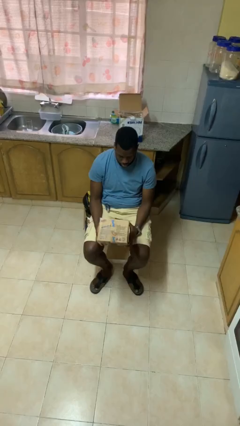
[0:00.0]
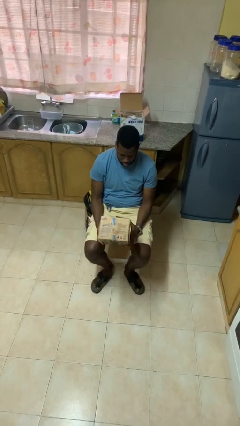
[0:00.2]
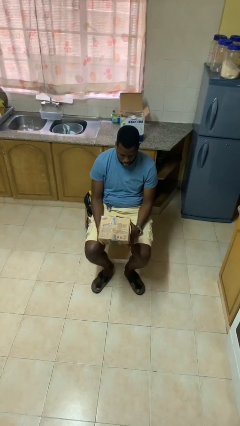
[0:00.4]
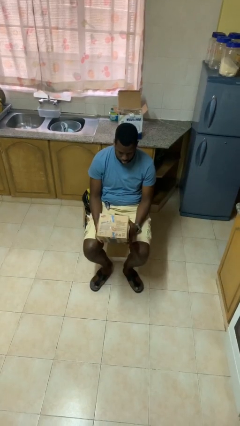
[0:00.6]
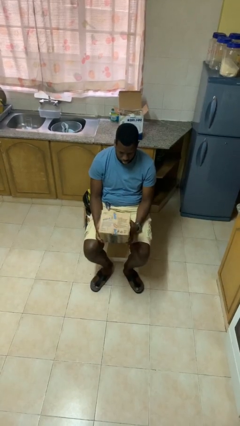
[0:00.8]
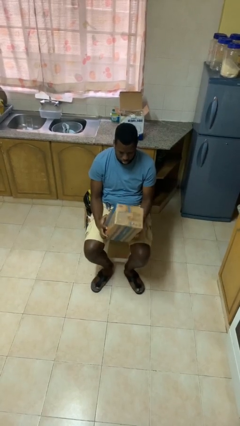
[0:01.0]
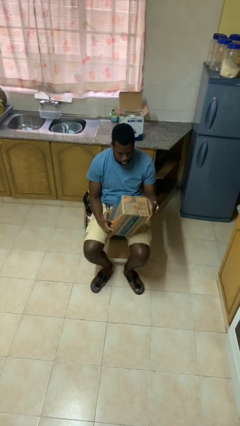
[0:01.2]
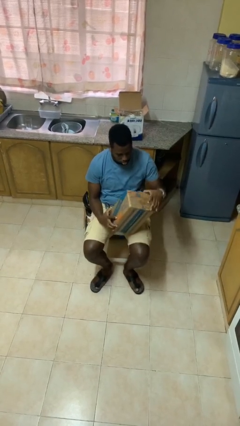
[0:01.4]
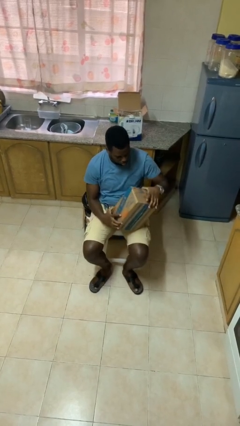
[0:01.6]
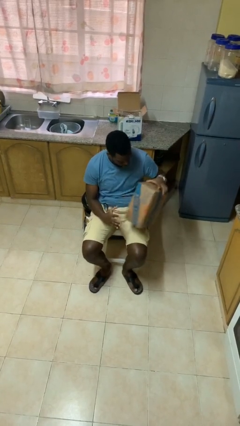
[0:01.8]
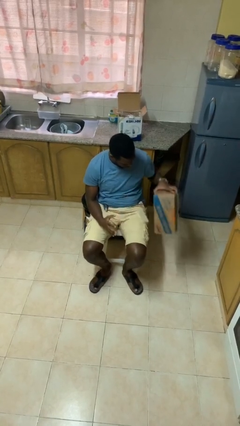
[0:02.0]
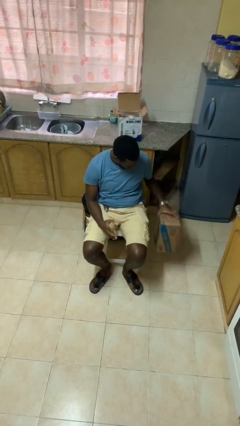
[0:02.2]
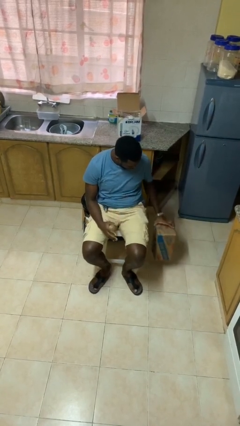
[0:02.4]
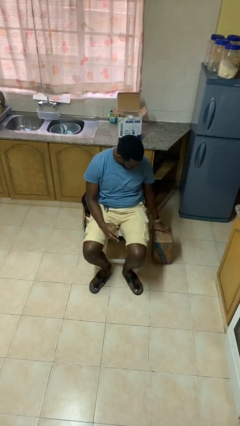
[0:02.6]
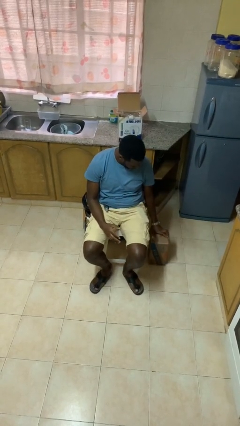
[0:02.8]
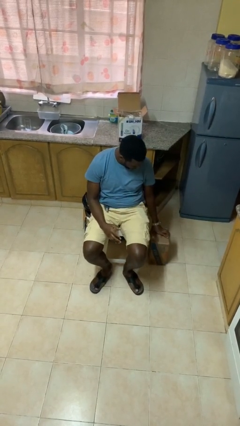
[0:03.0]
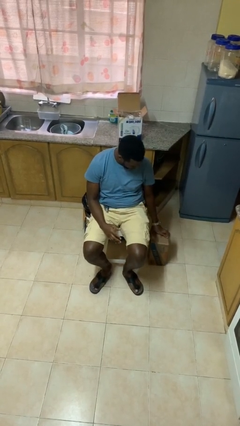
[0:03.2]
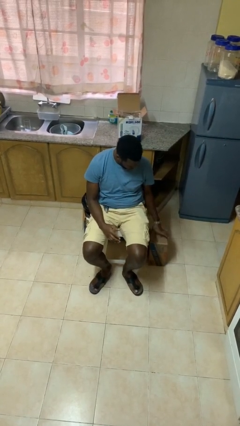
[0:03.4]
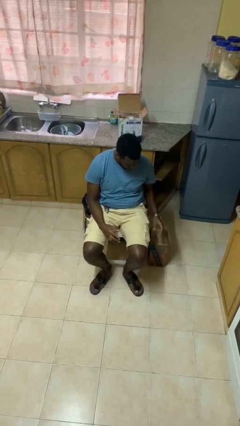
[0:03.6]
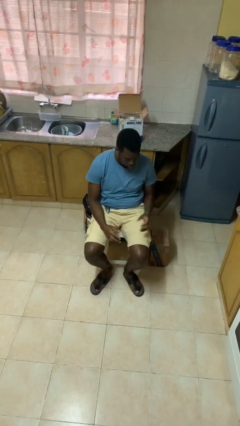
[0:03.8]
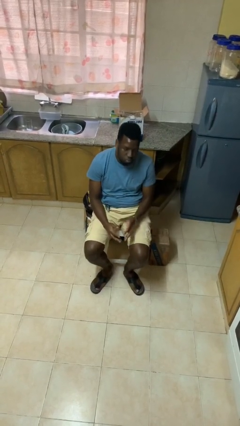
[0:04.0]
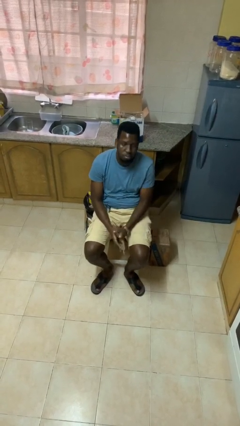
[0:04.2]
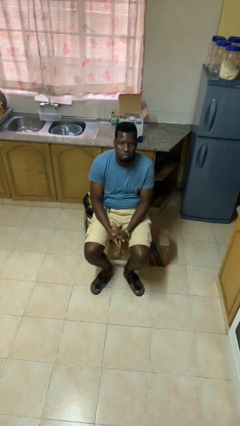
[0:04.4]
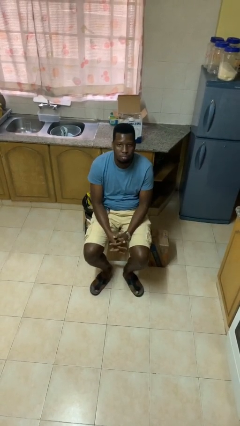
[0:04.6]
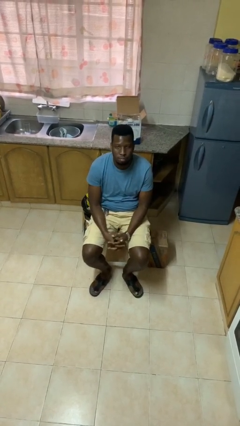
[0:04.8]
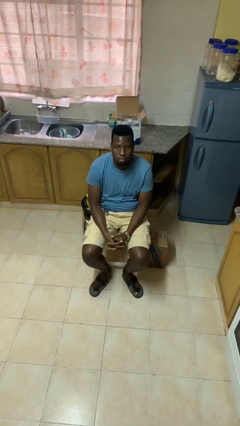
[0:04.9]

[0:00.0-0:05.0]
person puts down object on floor

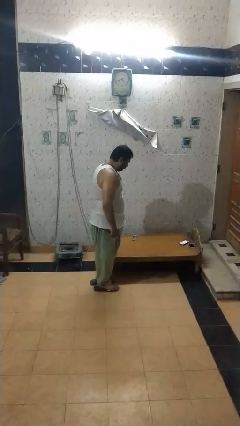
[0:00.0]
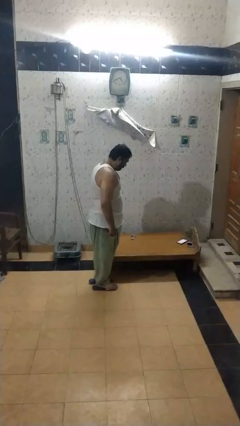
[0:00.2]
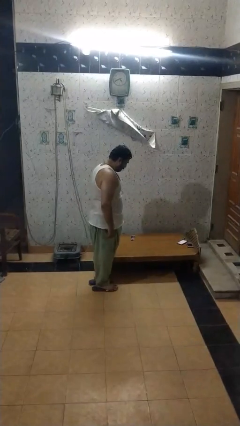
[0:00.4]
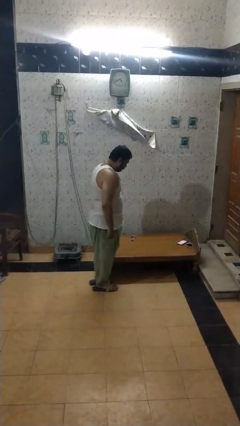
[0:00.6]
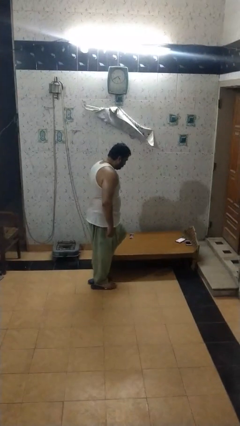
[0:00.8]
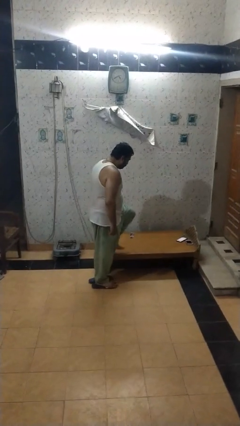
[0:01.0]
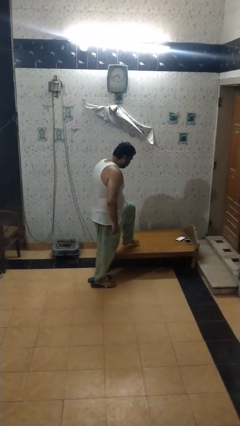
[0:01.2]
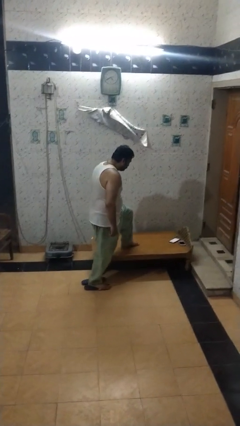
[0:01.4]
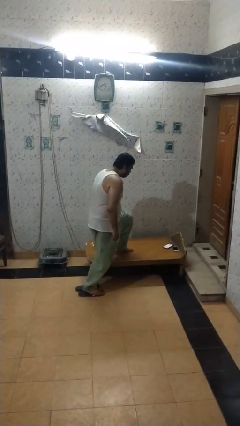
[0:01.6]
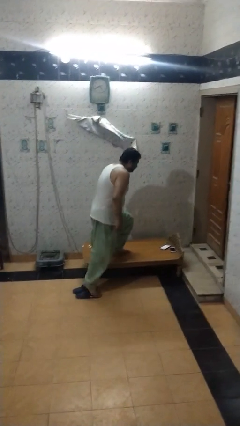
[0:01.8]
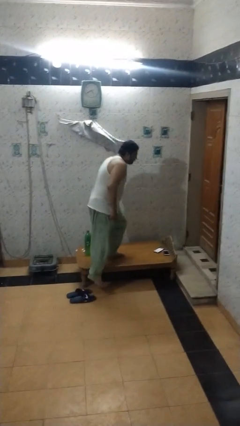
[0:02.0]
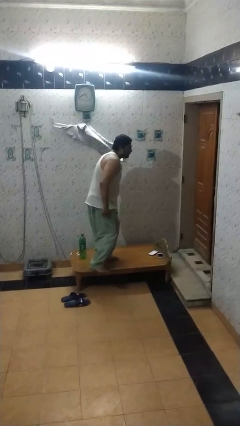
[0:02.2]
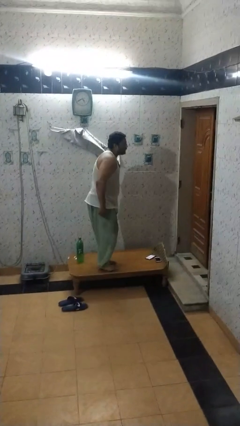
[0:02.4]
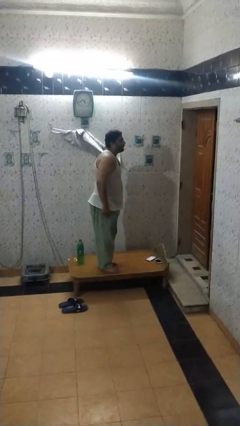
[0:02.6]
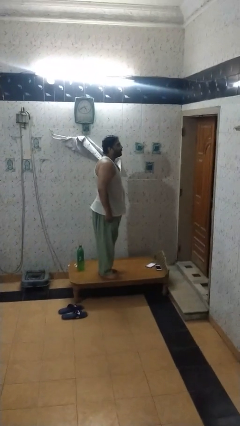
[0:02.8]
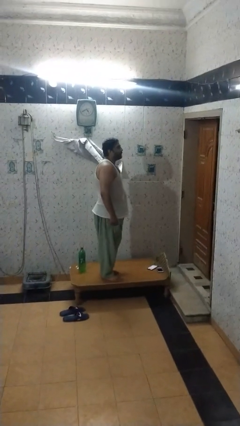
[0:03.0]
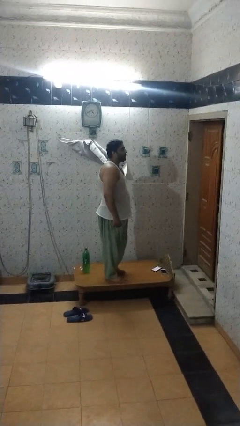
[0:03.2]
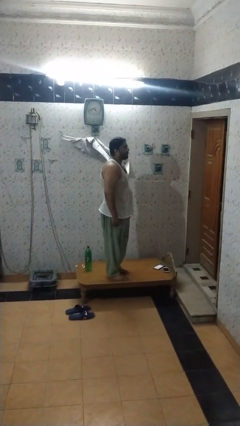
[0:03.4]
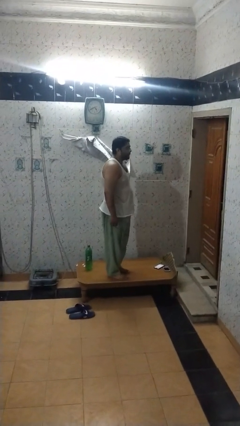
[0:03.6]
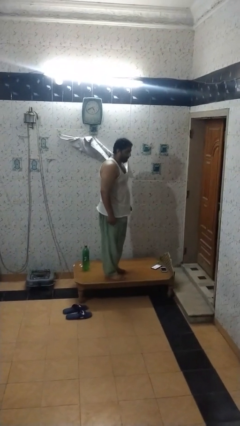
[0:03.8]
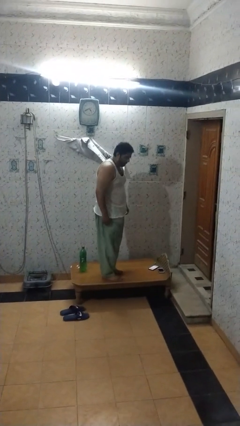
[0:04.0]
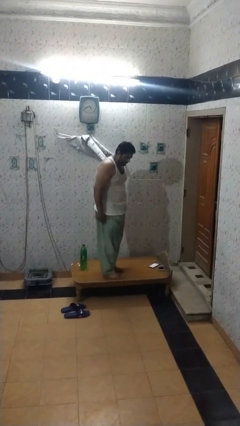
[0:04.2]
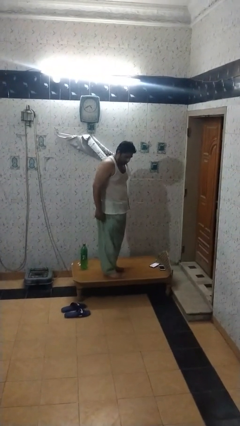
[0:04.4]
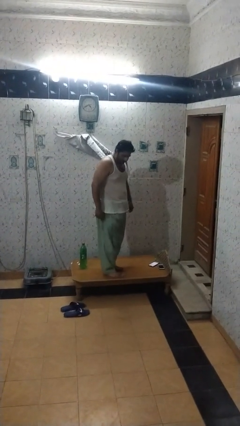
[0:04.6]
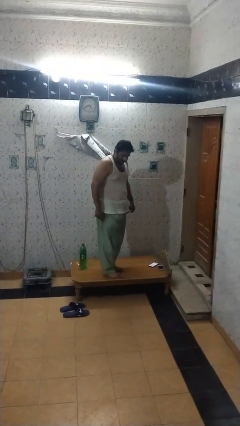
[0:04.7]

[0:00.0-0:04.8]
person climbs on table

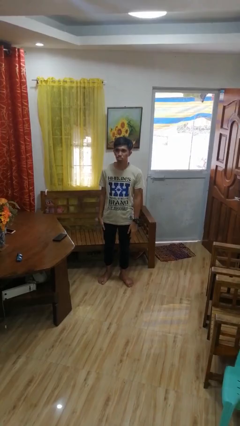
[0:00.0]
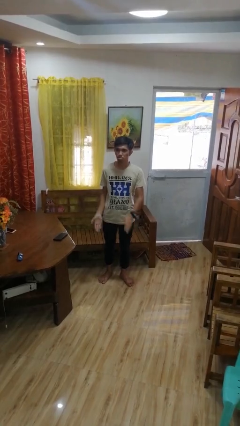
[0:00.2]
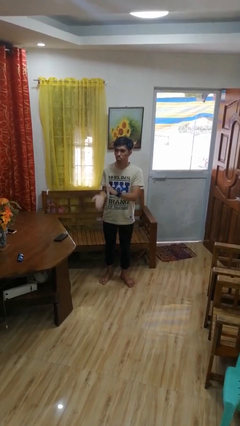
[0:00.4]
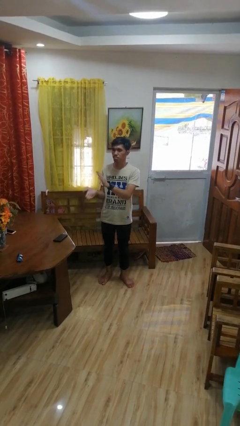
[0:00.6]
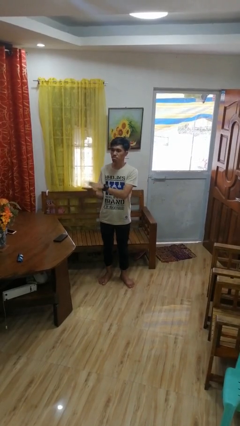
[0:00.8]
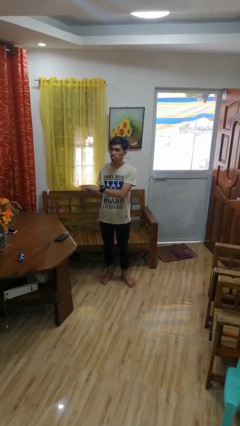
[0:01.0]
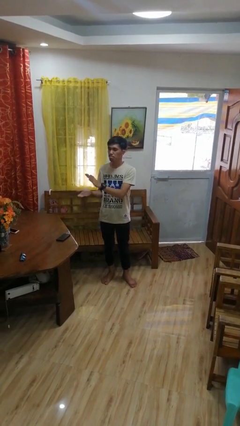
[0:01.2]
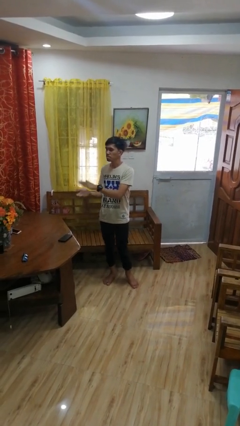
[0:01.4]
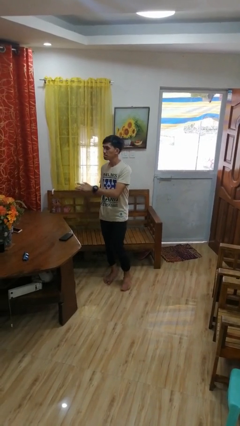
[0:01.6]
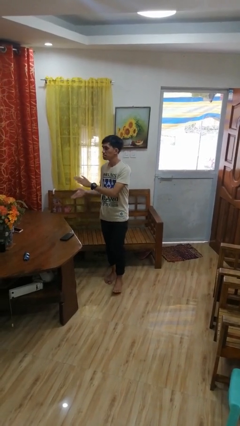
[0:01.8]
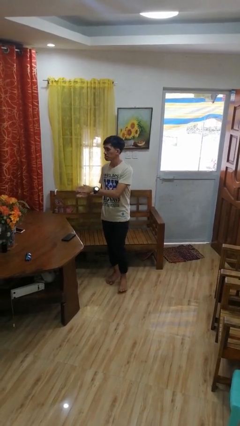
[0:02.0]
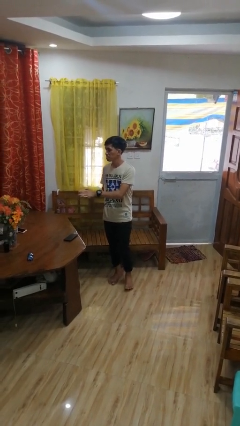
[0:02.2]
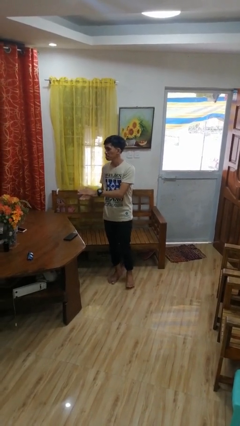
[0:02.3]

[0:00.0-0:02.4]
person claps hands

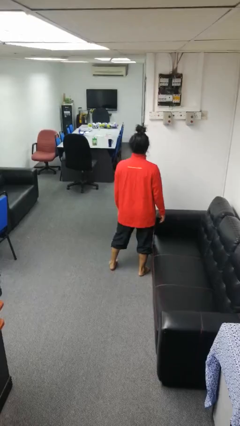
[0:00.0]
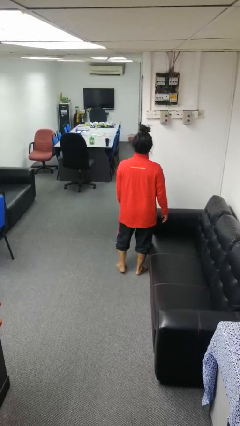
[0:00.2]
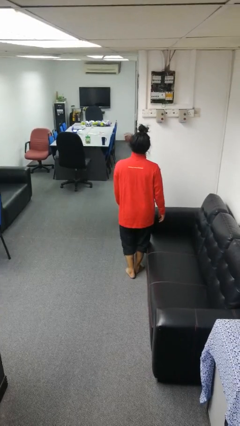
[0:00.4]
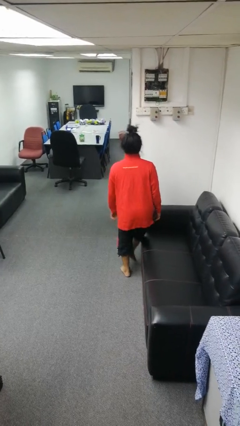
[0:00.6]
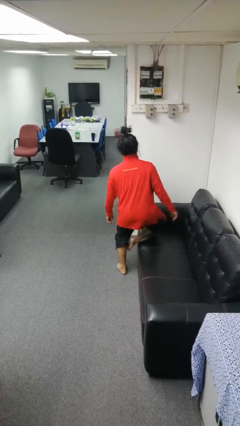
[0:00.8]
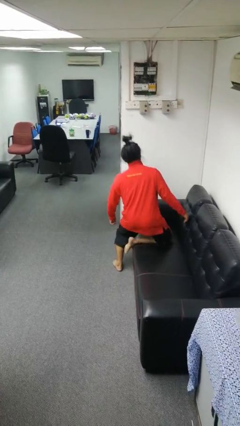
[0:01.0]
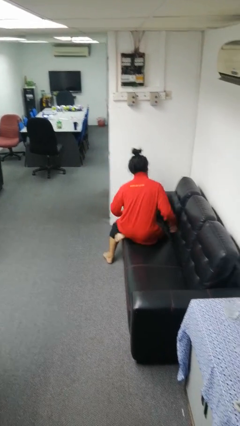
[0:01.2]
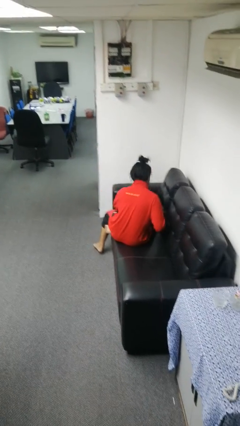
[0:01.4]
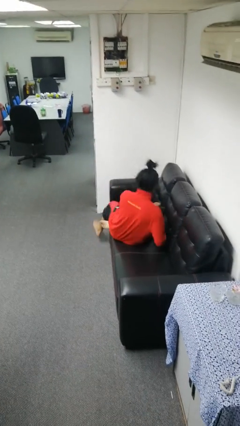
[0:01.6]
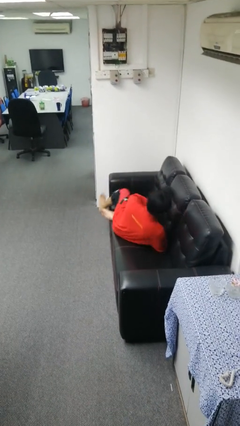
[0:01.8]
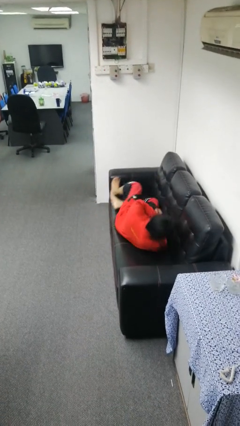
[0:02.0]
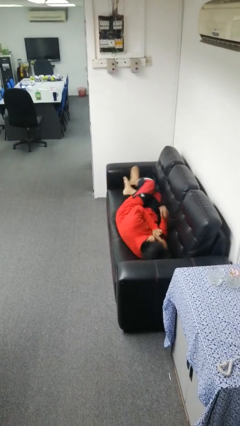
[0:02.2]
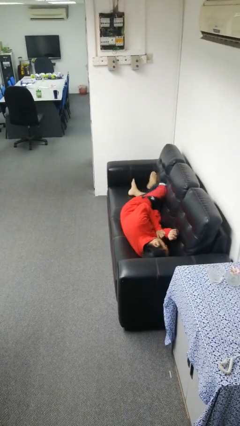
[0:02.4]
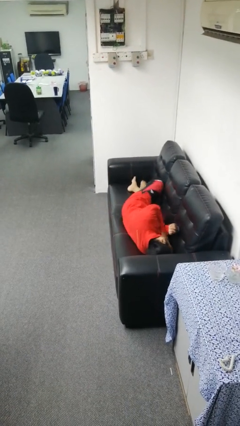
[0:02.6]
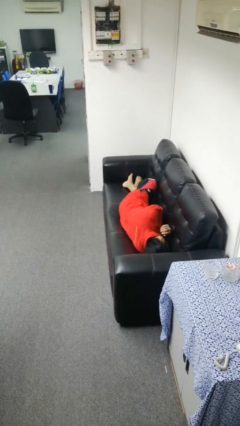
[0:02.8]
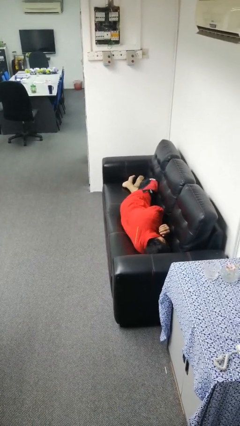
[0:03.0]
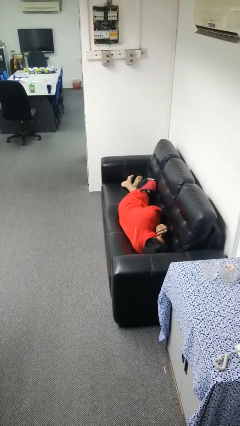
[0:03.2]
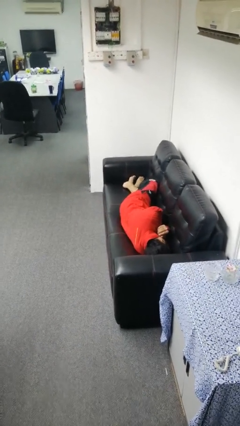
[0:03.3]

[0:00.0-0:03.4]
person lies down on couch

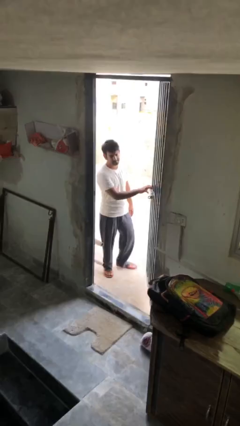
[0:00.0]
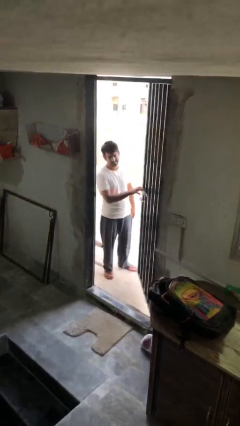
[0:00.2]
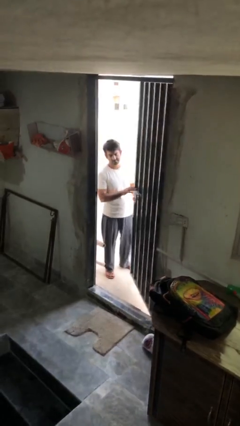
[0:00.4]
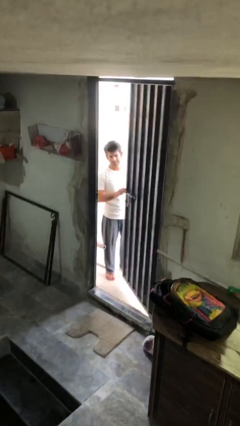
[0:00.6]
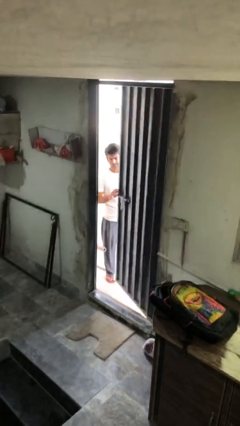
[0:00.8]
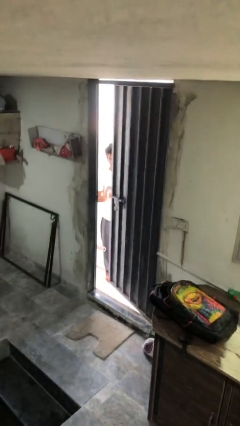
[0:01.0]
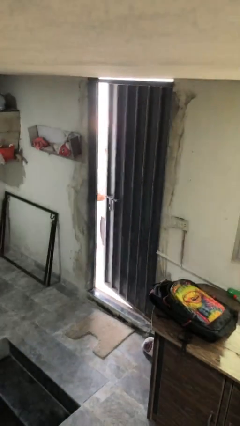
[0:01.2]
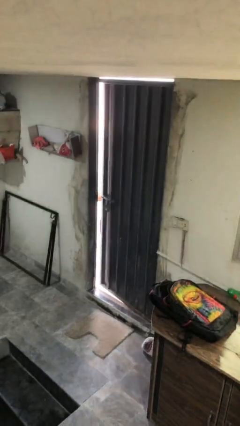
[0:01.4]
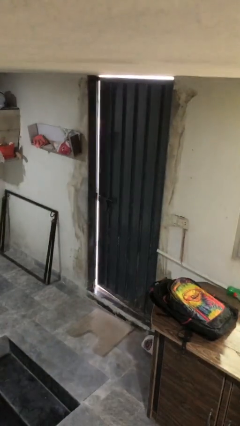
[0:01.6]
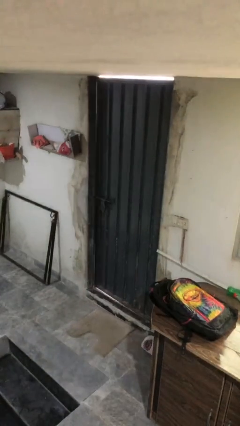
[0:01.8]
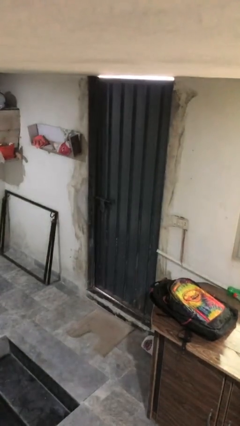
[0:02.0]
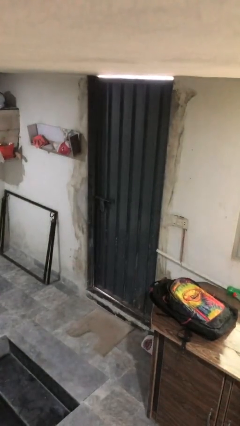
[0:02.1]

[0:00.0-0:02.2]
person closes facility door
